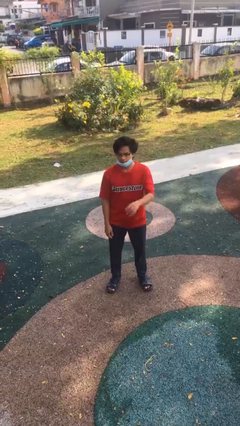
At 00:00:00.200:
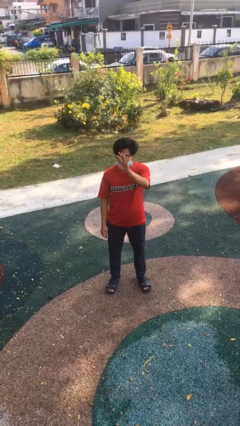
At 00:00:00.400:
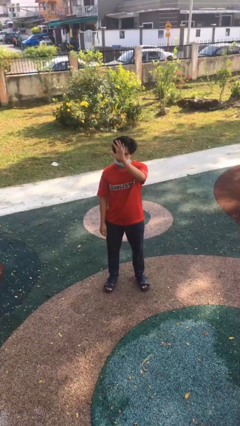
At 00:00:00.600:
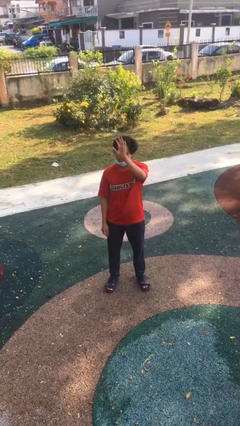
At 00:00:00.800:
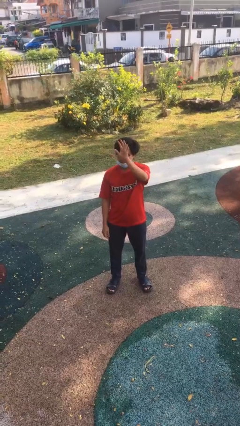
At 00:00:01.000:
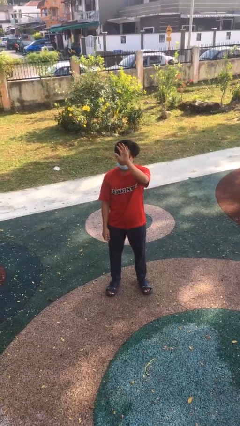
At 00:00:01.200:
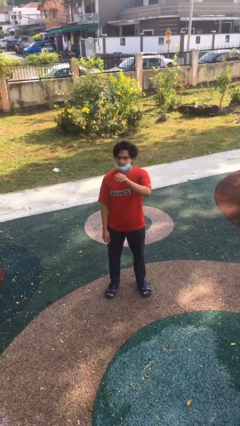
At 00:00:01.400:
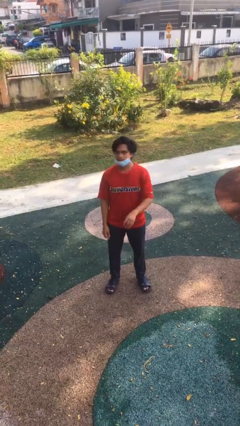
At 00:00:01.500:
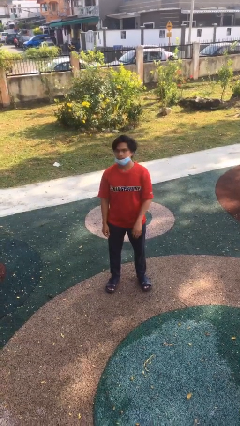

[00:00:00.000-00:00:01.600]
person waves at person

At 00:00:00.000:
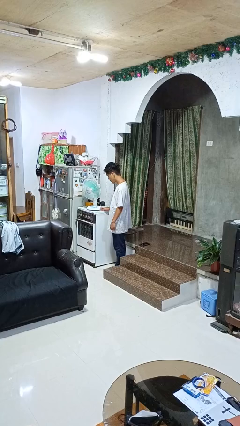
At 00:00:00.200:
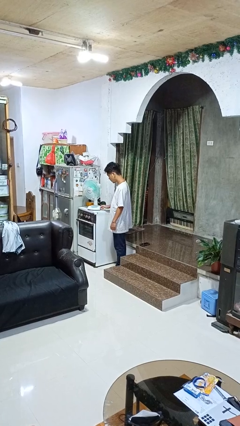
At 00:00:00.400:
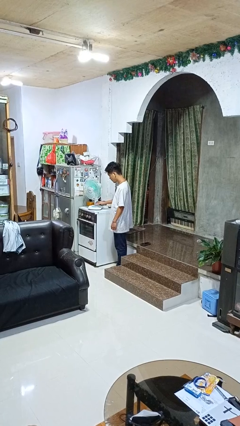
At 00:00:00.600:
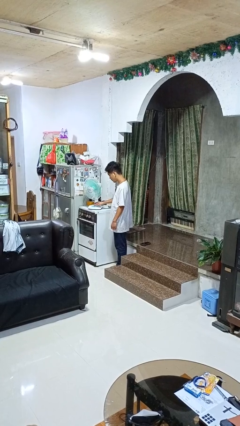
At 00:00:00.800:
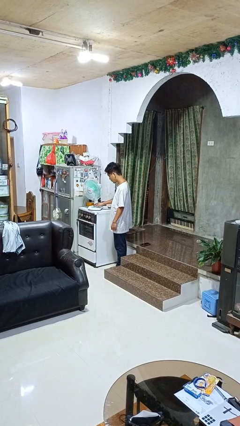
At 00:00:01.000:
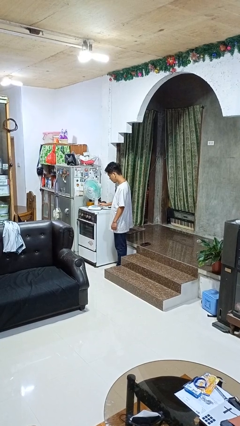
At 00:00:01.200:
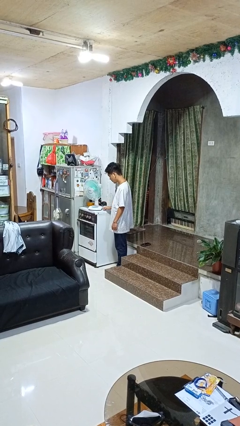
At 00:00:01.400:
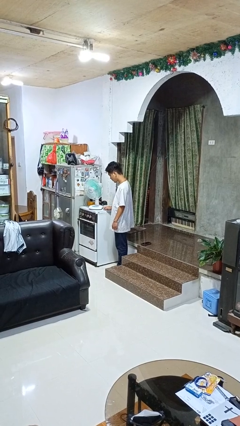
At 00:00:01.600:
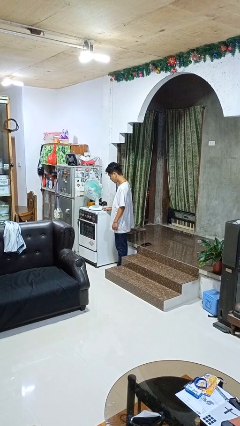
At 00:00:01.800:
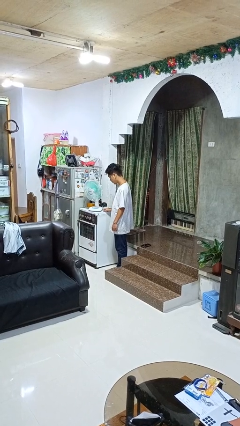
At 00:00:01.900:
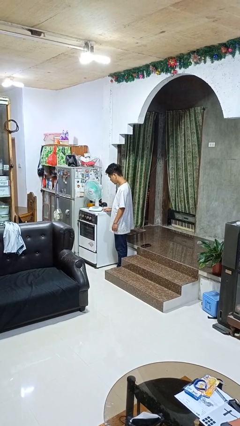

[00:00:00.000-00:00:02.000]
person turns on fan

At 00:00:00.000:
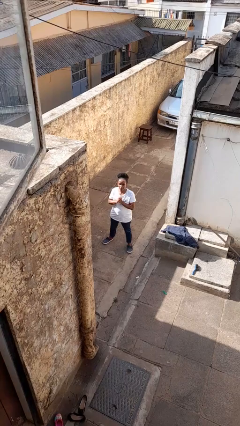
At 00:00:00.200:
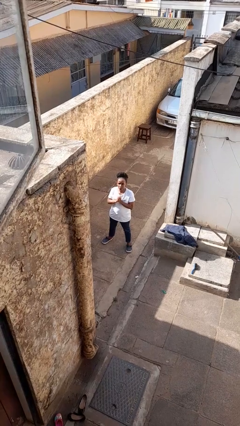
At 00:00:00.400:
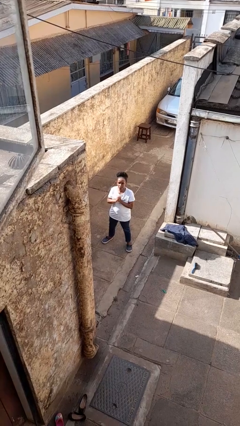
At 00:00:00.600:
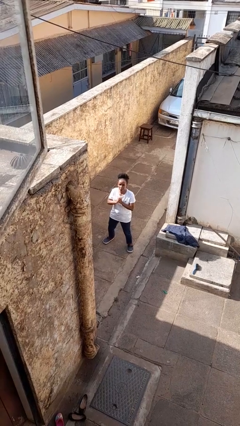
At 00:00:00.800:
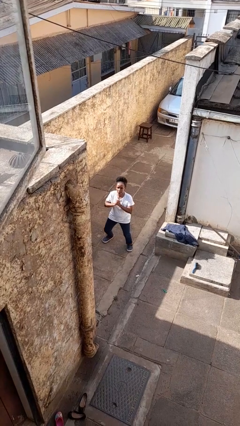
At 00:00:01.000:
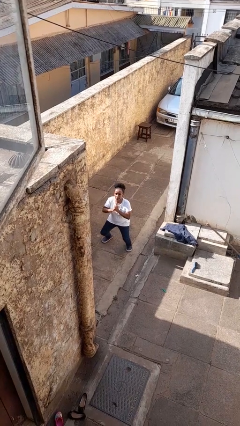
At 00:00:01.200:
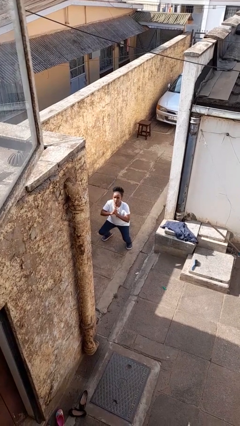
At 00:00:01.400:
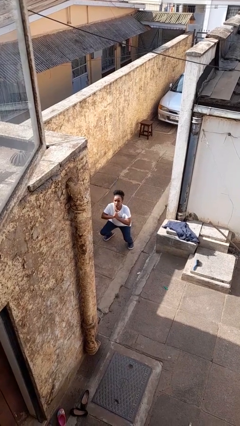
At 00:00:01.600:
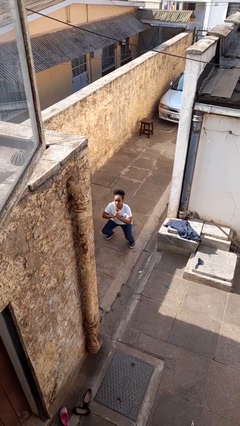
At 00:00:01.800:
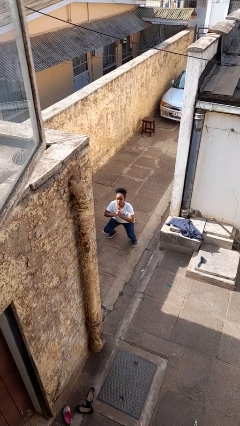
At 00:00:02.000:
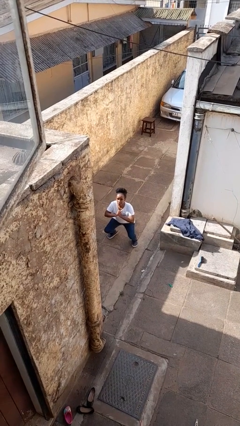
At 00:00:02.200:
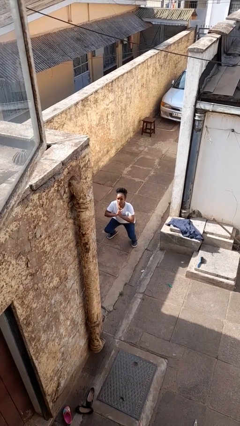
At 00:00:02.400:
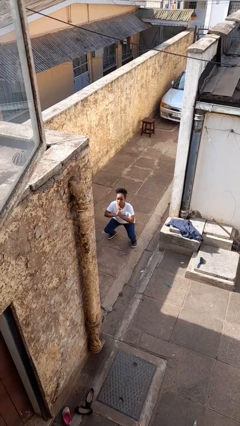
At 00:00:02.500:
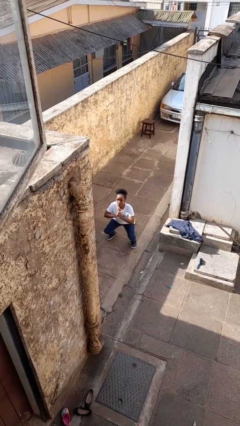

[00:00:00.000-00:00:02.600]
person squats

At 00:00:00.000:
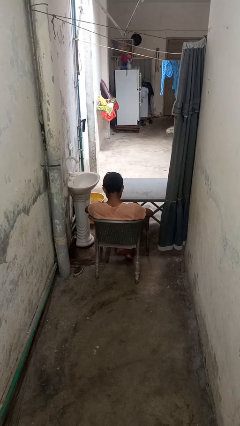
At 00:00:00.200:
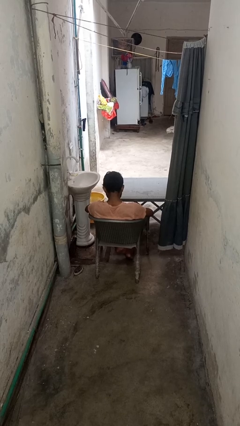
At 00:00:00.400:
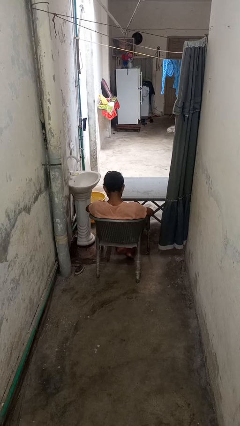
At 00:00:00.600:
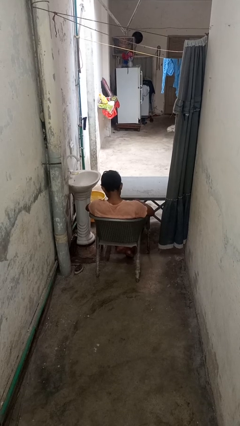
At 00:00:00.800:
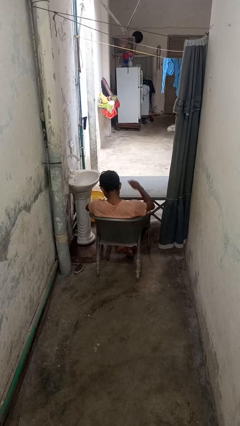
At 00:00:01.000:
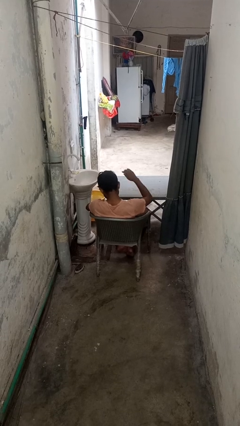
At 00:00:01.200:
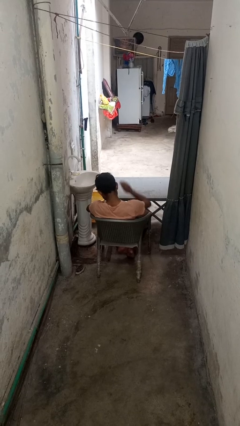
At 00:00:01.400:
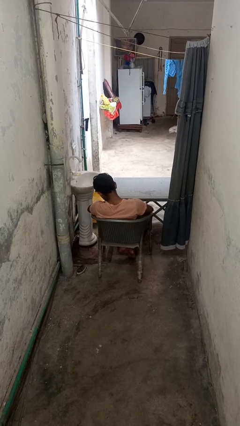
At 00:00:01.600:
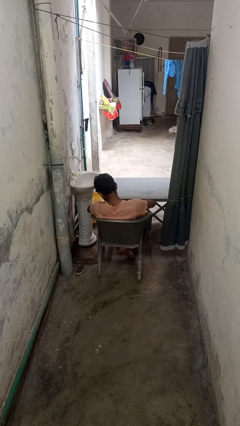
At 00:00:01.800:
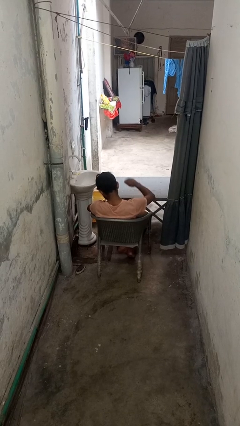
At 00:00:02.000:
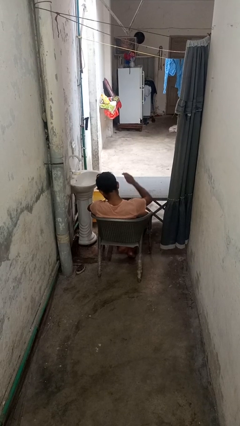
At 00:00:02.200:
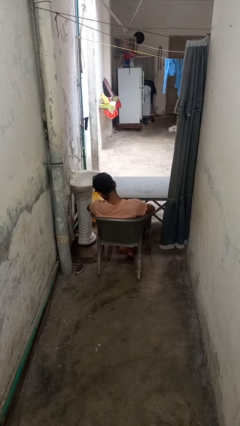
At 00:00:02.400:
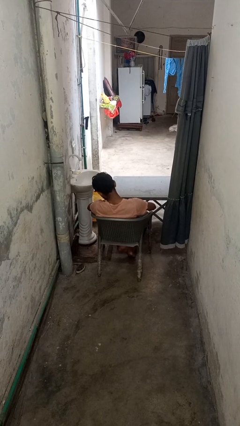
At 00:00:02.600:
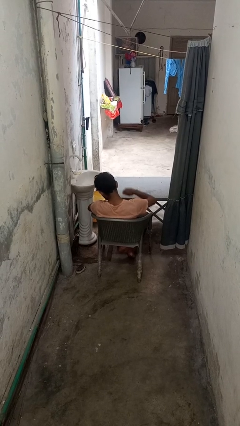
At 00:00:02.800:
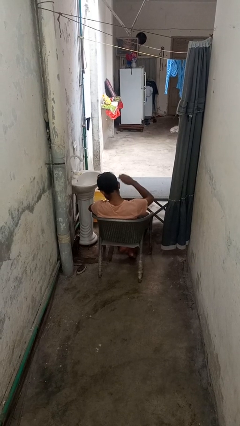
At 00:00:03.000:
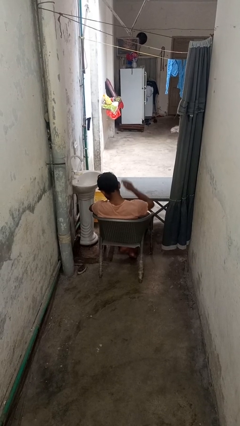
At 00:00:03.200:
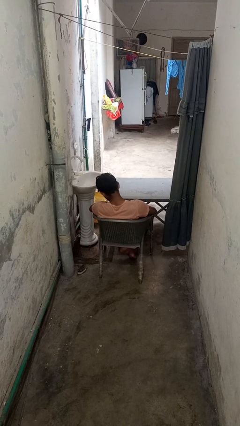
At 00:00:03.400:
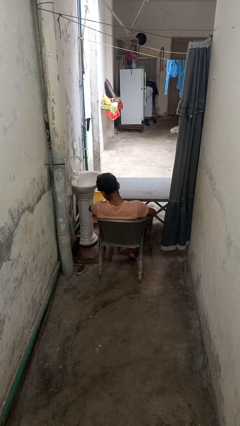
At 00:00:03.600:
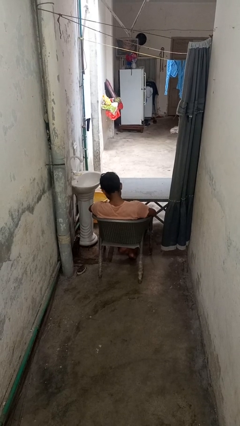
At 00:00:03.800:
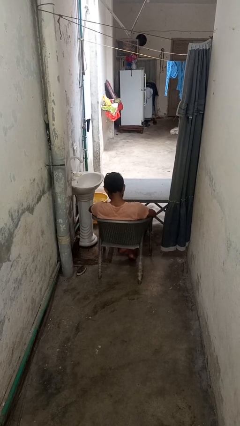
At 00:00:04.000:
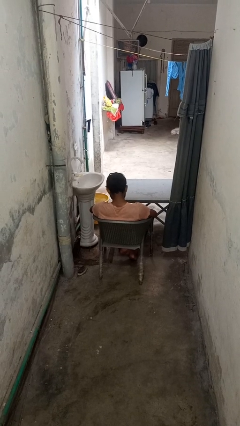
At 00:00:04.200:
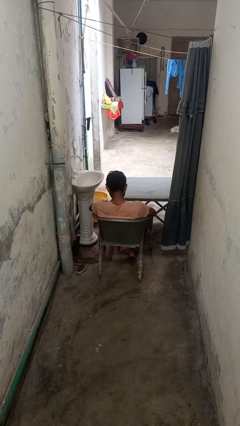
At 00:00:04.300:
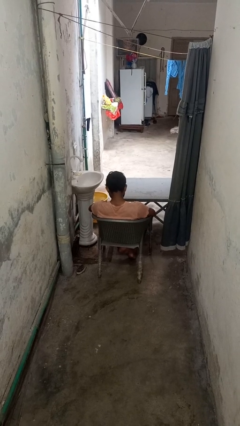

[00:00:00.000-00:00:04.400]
person slaps hands on thighs

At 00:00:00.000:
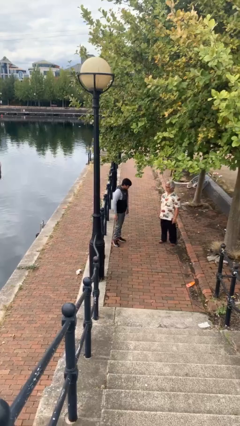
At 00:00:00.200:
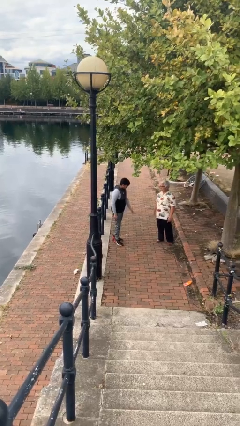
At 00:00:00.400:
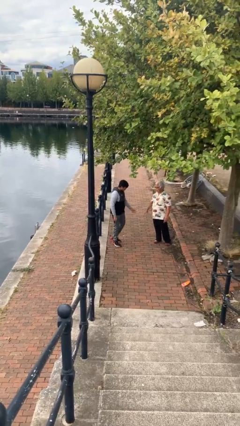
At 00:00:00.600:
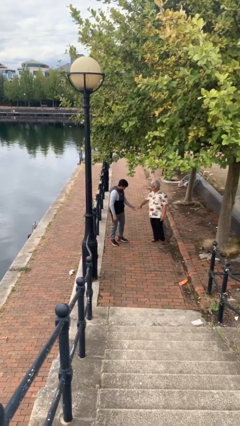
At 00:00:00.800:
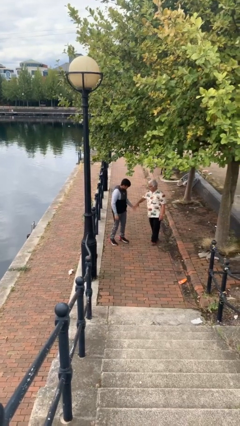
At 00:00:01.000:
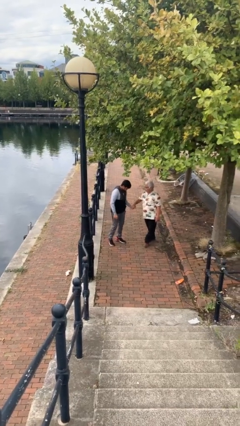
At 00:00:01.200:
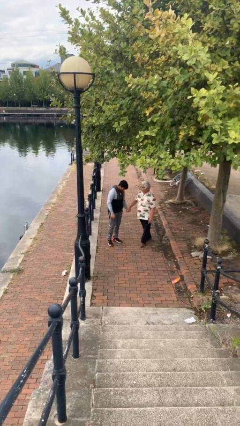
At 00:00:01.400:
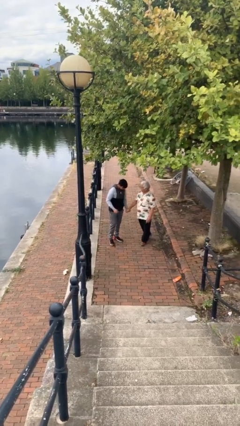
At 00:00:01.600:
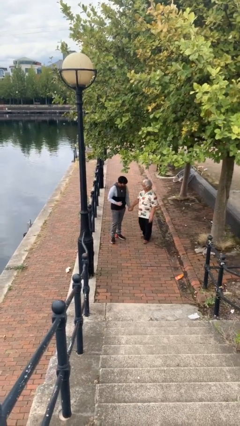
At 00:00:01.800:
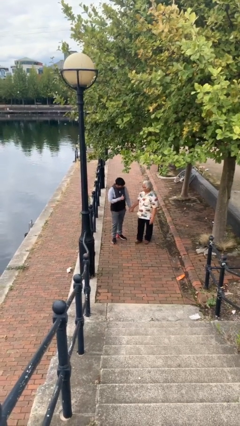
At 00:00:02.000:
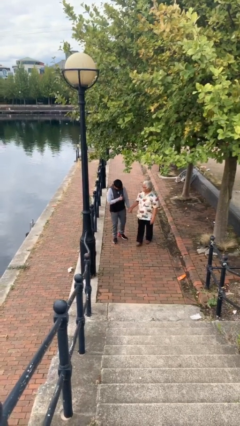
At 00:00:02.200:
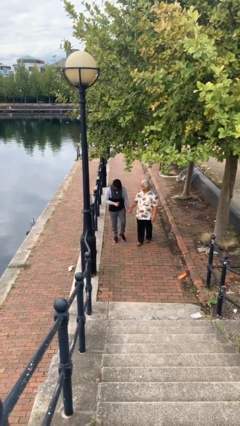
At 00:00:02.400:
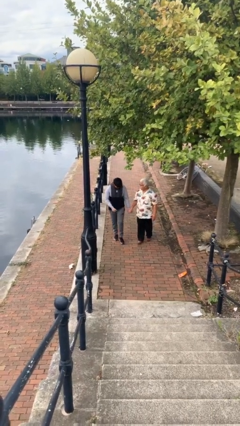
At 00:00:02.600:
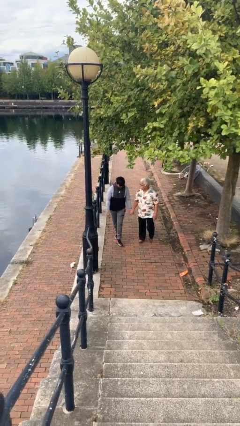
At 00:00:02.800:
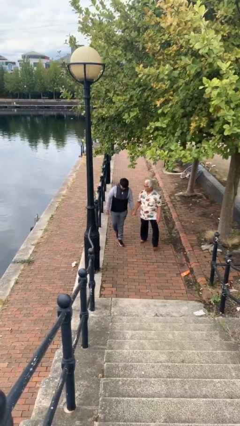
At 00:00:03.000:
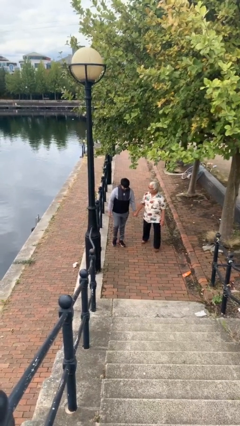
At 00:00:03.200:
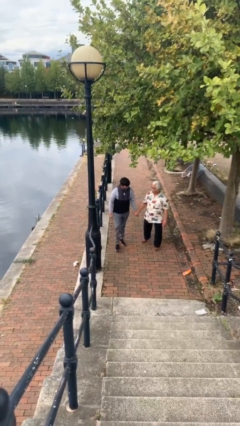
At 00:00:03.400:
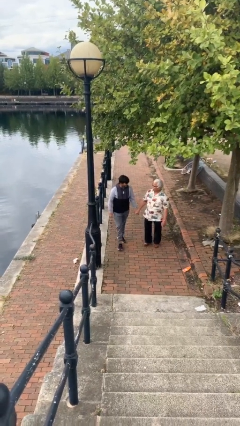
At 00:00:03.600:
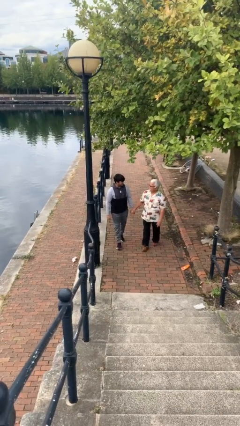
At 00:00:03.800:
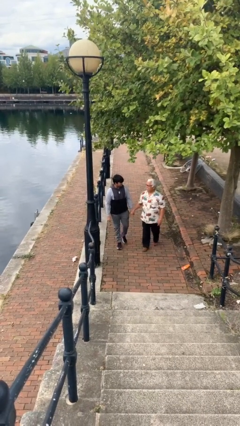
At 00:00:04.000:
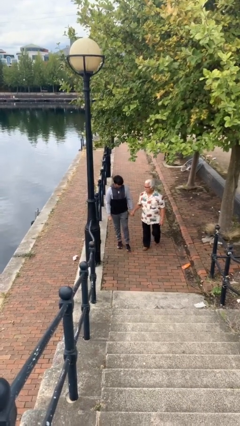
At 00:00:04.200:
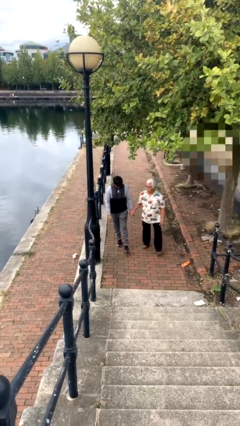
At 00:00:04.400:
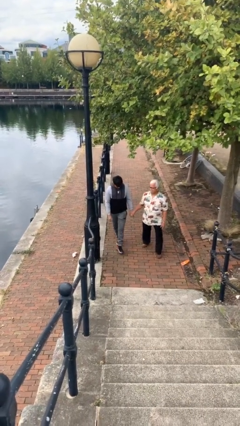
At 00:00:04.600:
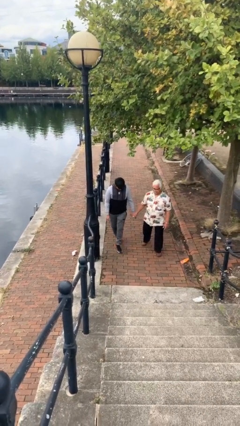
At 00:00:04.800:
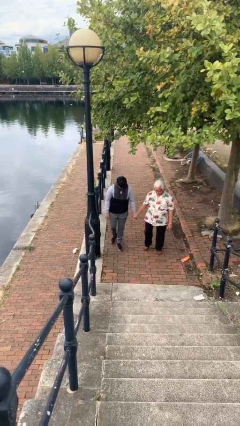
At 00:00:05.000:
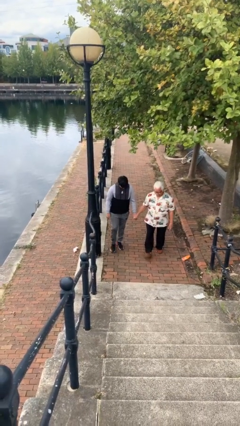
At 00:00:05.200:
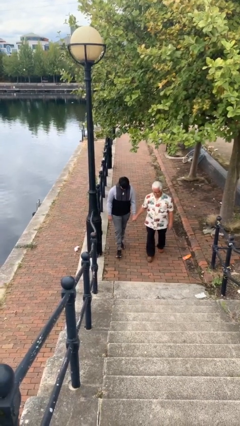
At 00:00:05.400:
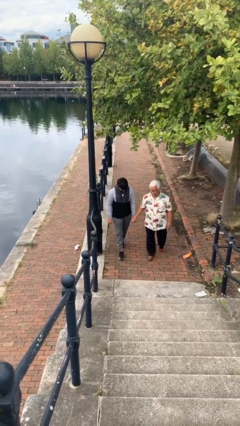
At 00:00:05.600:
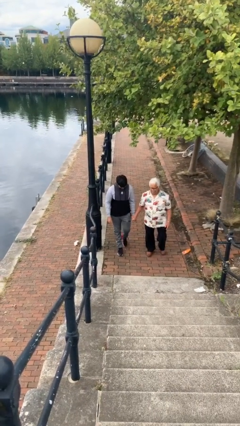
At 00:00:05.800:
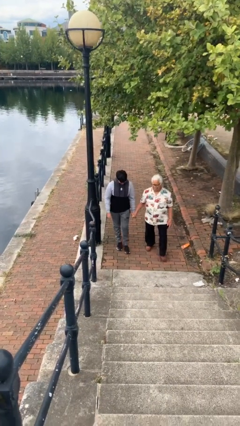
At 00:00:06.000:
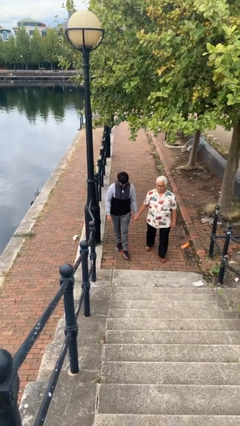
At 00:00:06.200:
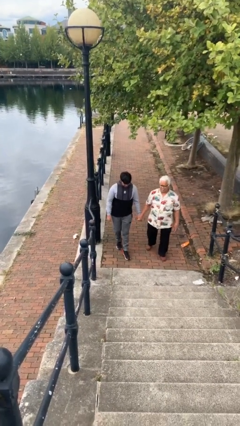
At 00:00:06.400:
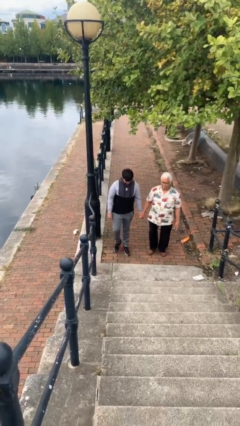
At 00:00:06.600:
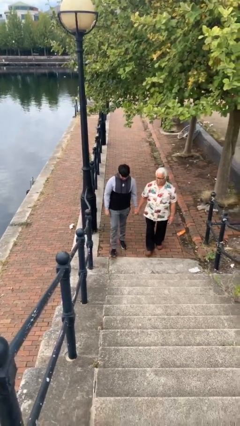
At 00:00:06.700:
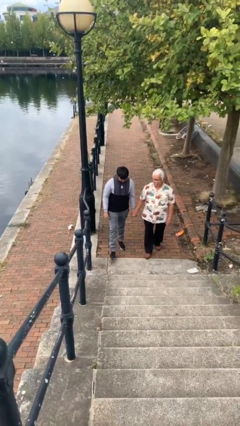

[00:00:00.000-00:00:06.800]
person holds hand
